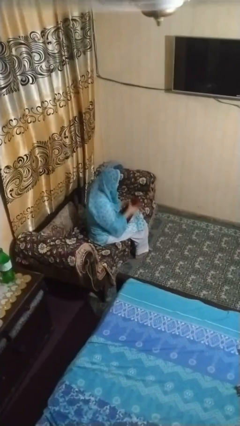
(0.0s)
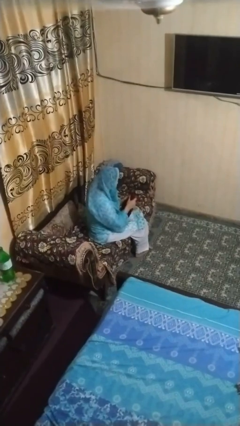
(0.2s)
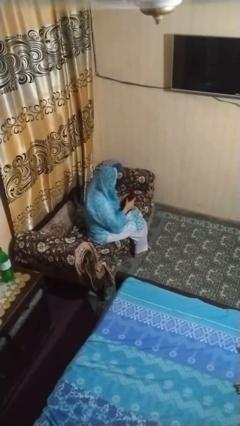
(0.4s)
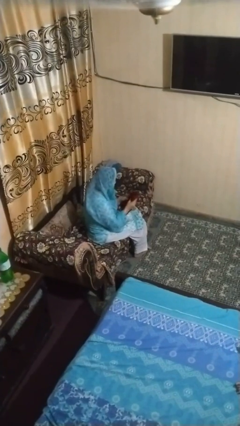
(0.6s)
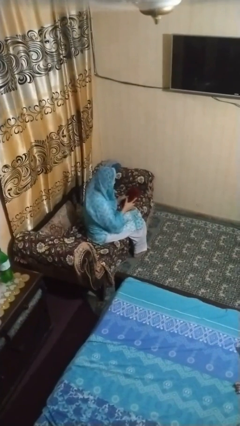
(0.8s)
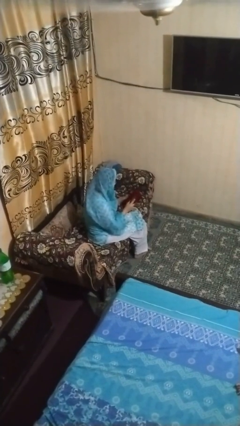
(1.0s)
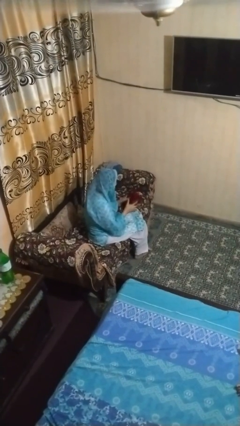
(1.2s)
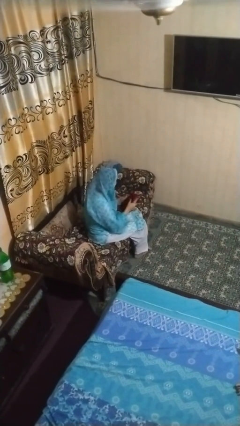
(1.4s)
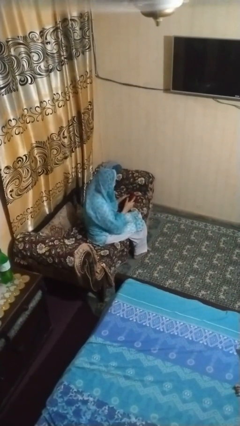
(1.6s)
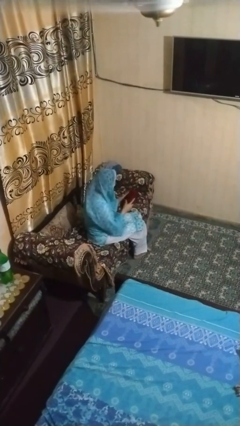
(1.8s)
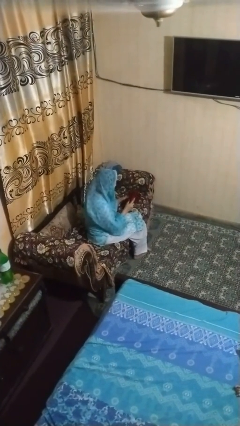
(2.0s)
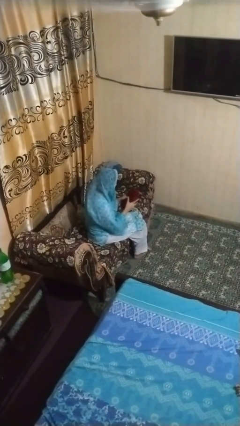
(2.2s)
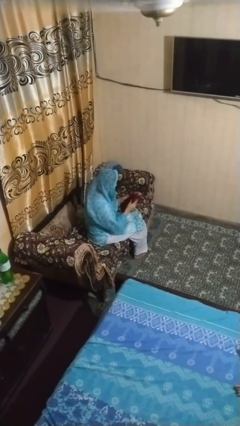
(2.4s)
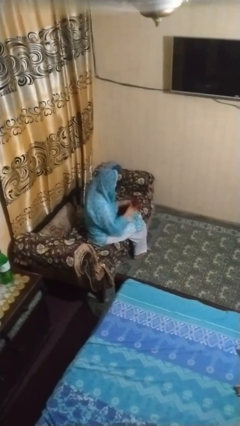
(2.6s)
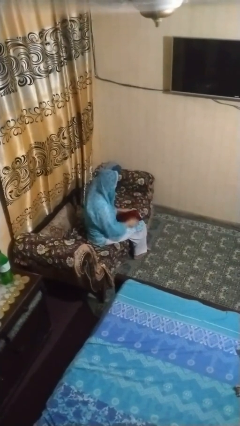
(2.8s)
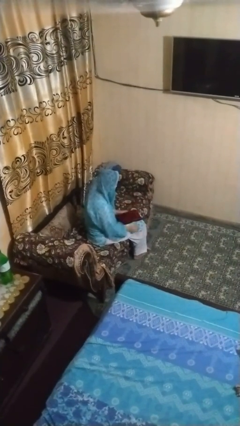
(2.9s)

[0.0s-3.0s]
person squeezes object

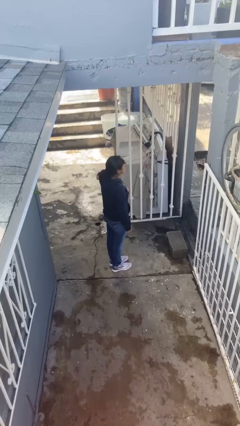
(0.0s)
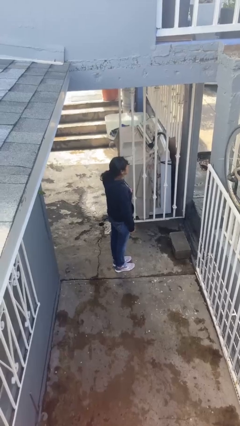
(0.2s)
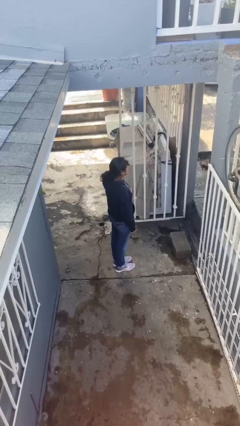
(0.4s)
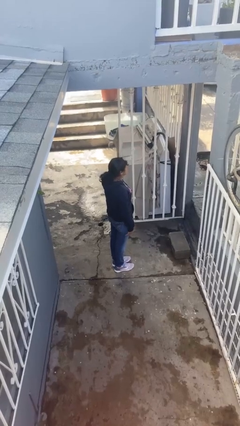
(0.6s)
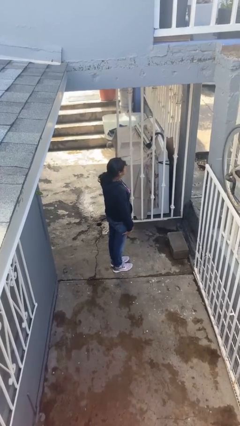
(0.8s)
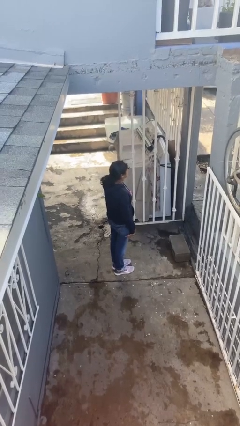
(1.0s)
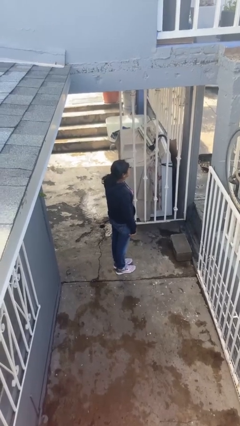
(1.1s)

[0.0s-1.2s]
person opens facility door

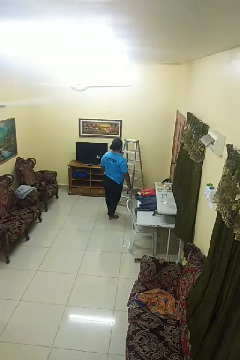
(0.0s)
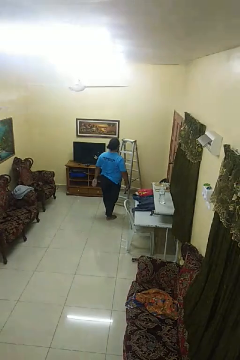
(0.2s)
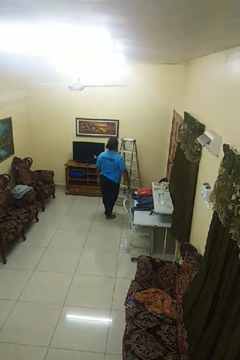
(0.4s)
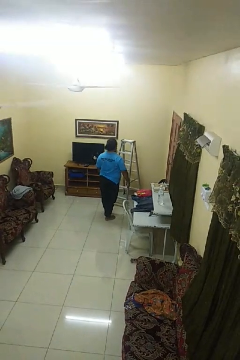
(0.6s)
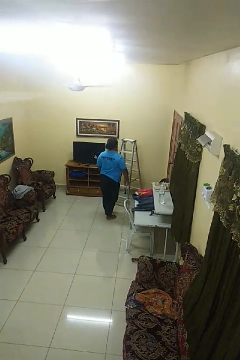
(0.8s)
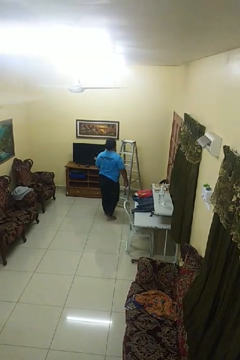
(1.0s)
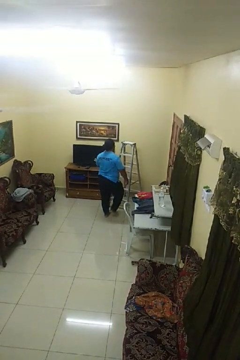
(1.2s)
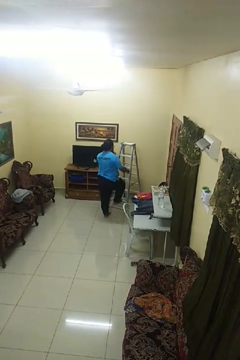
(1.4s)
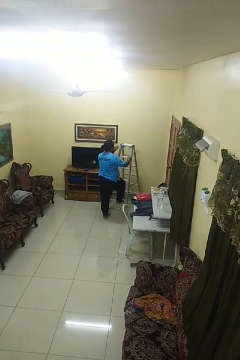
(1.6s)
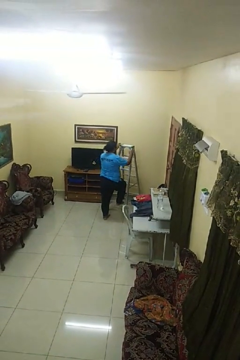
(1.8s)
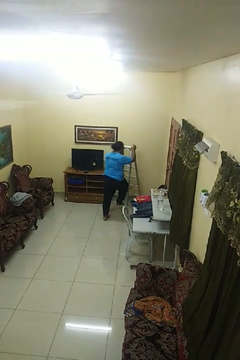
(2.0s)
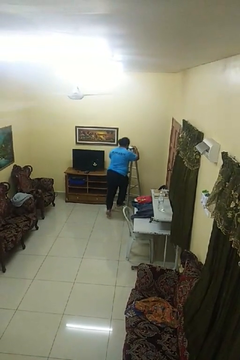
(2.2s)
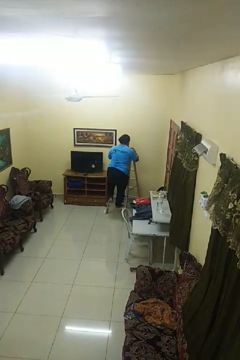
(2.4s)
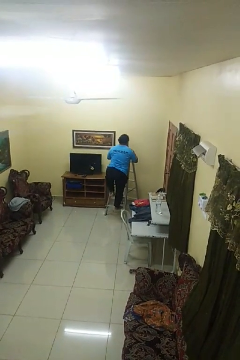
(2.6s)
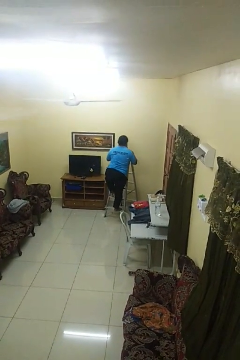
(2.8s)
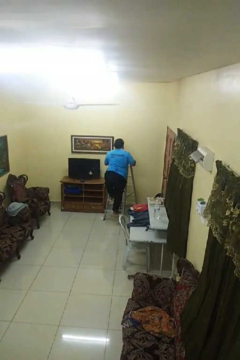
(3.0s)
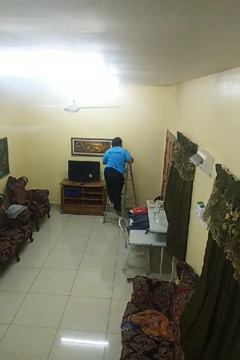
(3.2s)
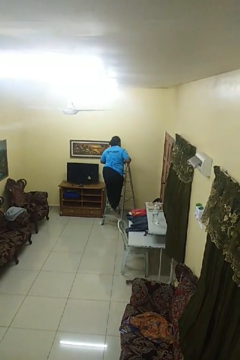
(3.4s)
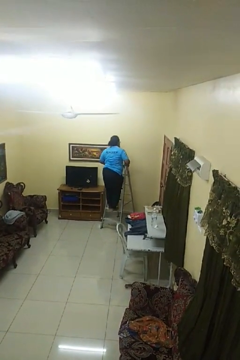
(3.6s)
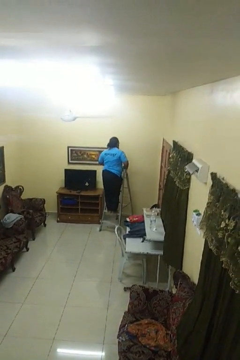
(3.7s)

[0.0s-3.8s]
person climbs up ladder

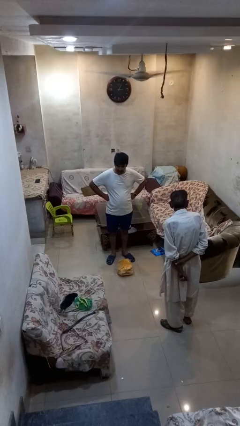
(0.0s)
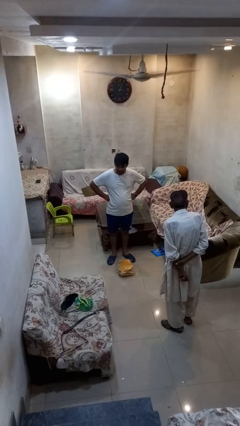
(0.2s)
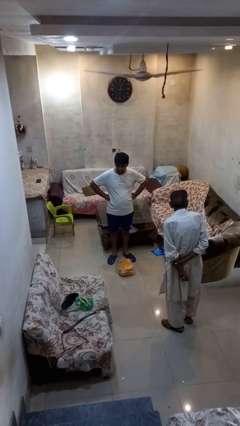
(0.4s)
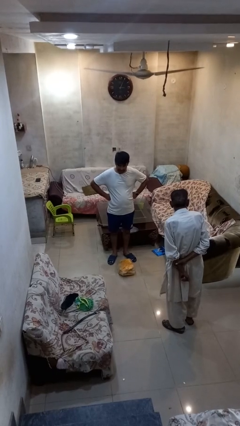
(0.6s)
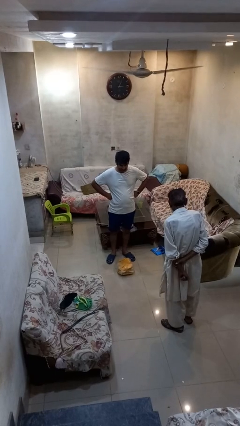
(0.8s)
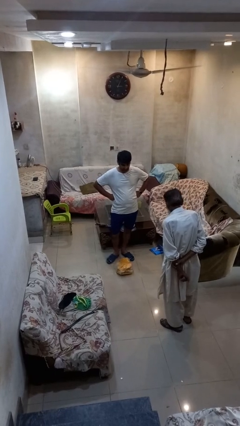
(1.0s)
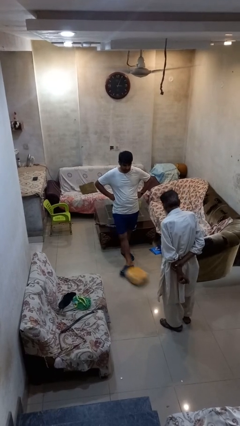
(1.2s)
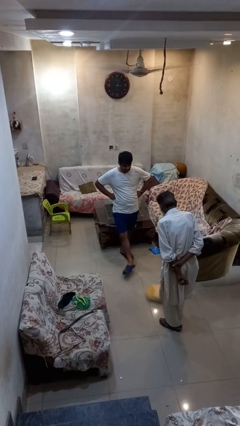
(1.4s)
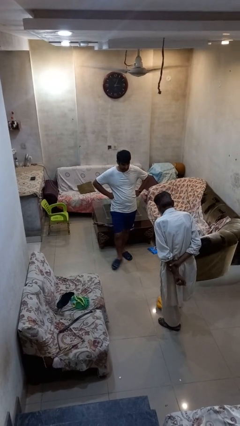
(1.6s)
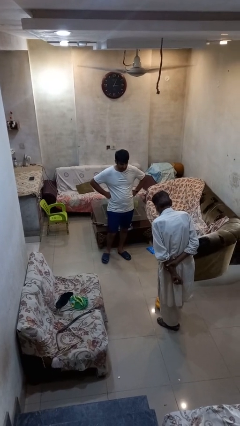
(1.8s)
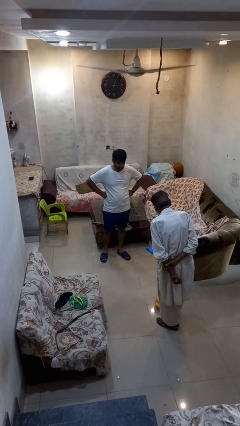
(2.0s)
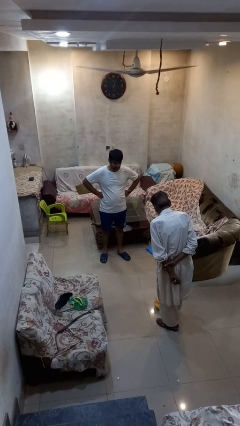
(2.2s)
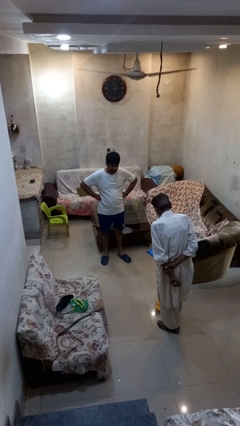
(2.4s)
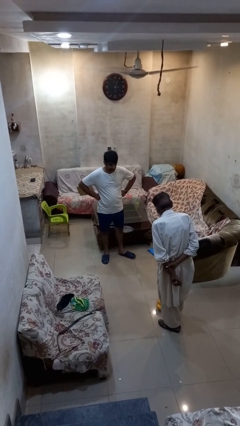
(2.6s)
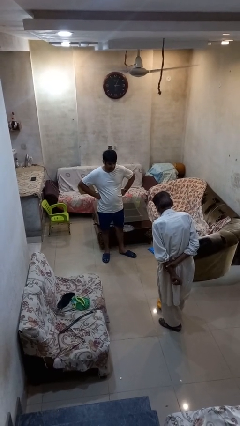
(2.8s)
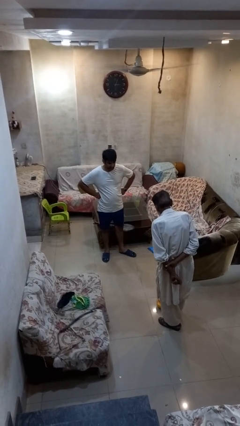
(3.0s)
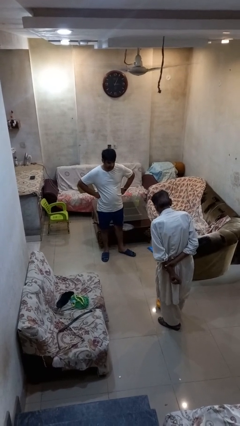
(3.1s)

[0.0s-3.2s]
person kicks object to person

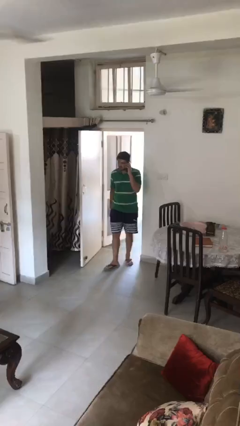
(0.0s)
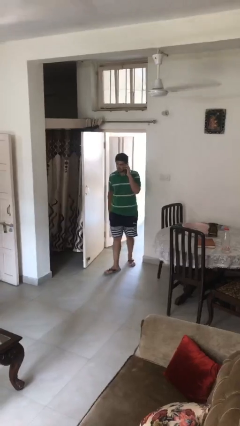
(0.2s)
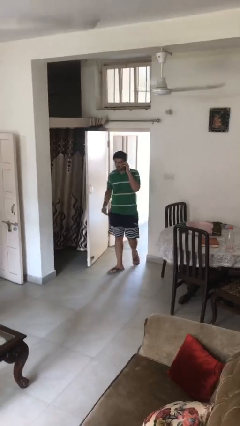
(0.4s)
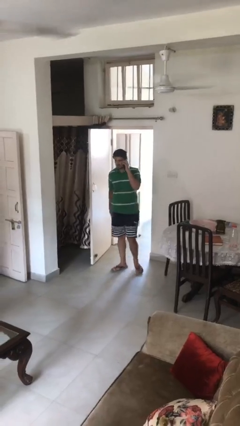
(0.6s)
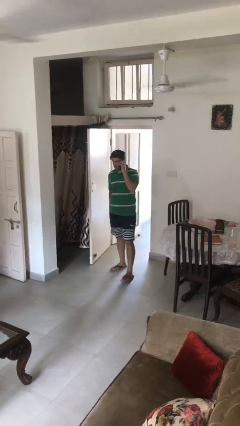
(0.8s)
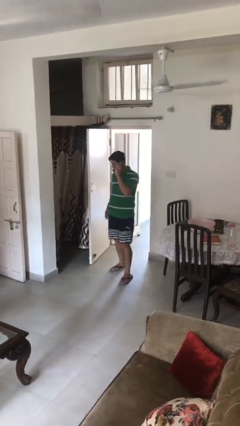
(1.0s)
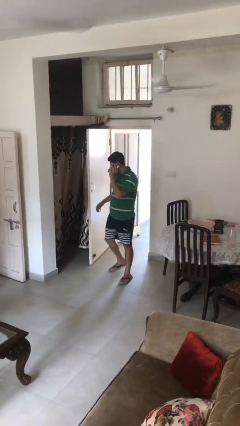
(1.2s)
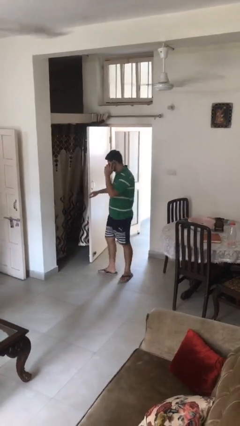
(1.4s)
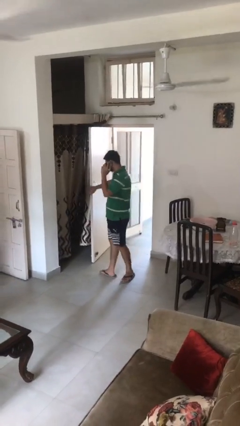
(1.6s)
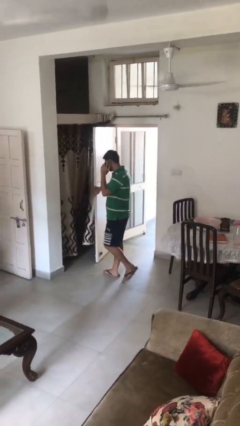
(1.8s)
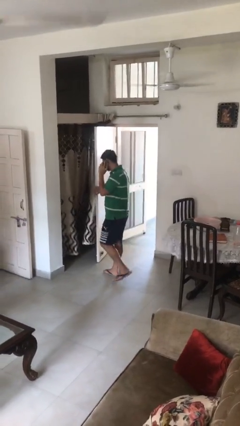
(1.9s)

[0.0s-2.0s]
person enters scene through structure

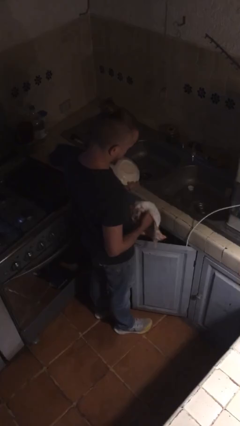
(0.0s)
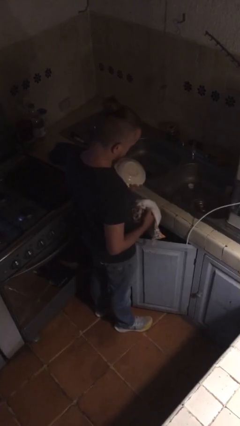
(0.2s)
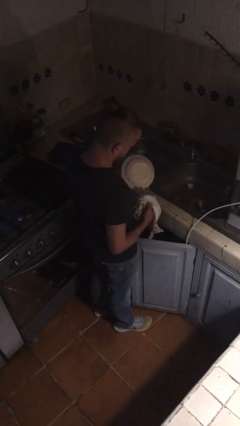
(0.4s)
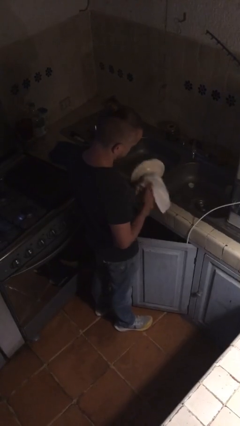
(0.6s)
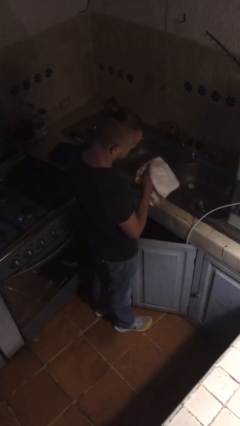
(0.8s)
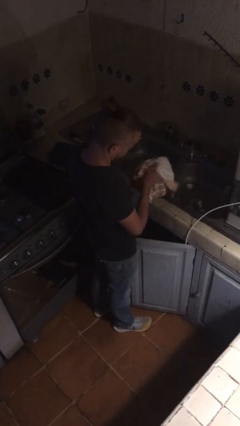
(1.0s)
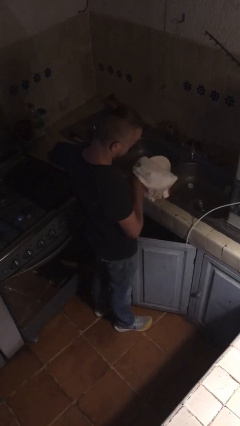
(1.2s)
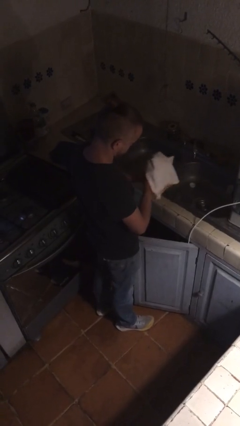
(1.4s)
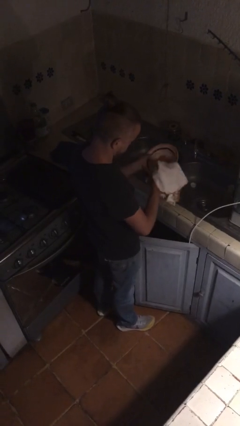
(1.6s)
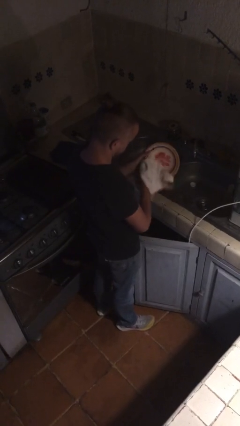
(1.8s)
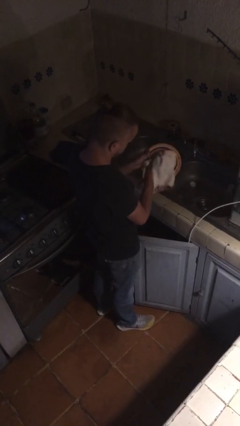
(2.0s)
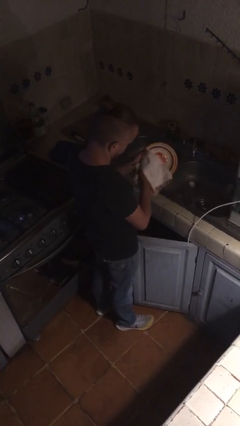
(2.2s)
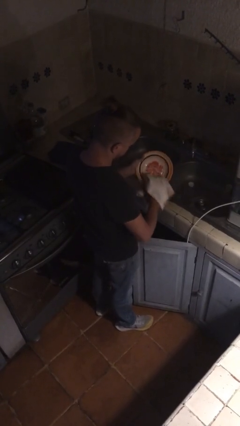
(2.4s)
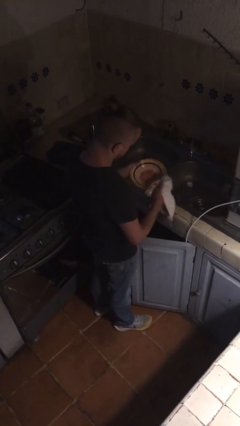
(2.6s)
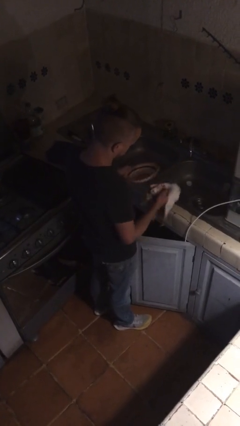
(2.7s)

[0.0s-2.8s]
person dries dish

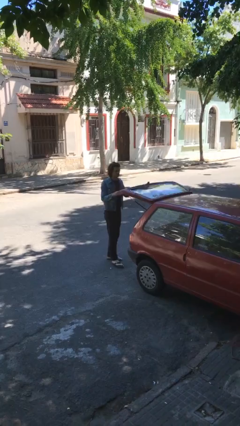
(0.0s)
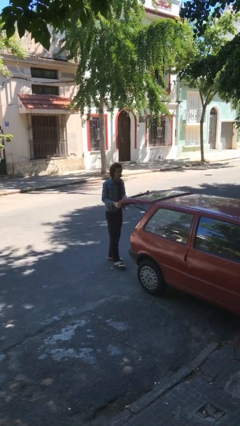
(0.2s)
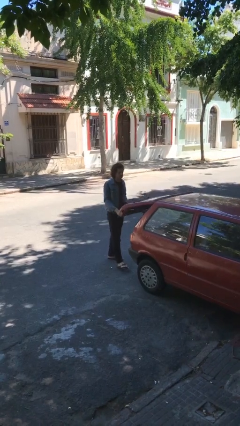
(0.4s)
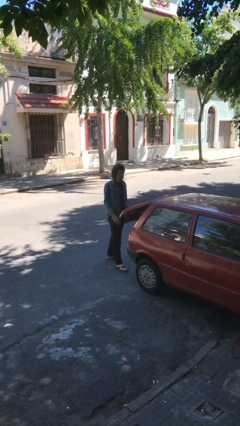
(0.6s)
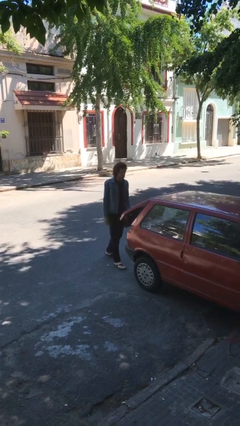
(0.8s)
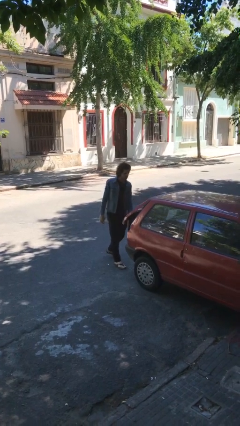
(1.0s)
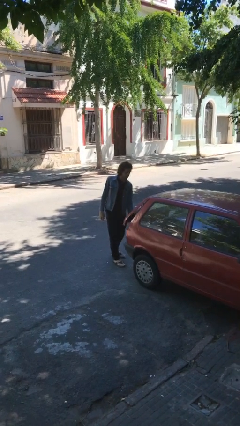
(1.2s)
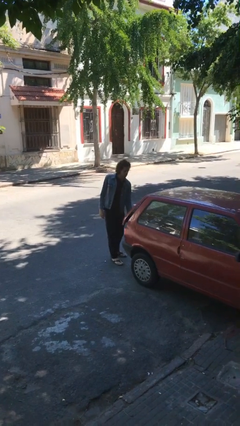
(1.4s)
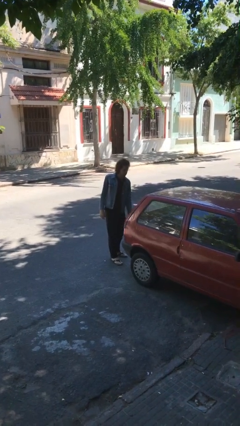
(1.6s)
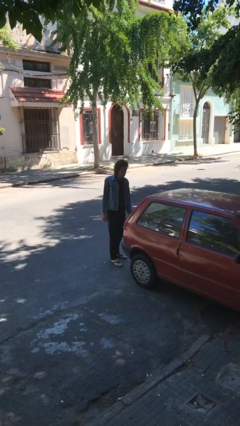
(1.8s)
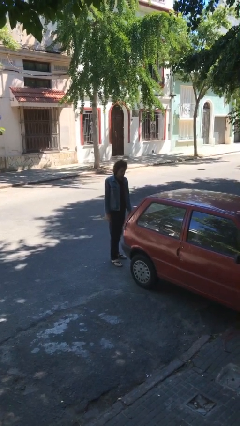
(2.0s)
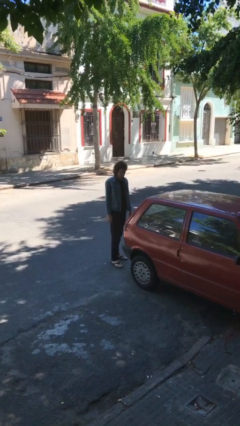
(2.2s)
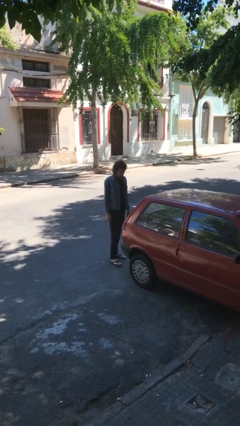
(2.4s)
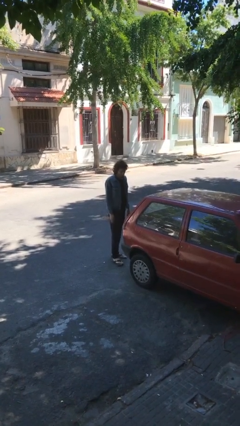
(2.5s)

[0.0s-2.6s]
person closes car trunk
